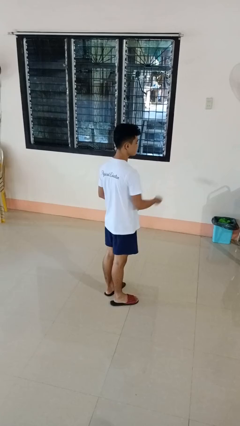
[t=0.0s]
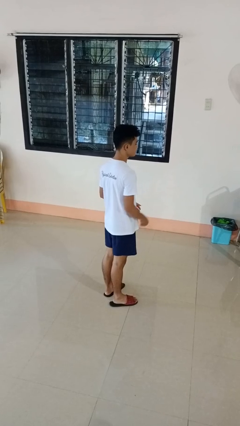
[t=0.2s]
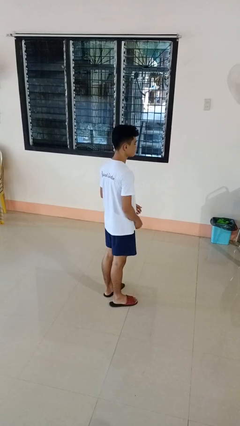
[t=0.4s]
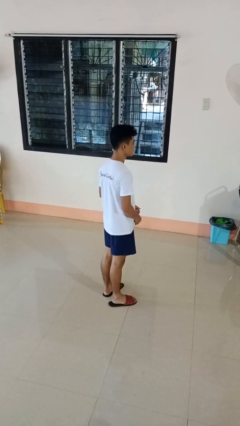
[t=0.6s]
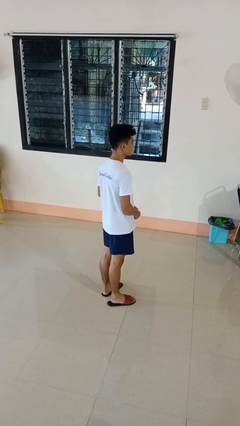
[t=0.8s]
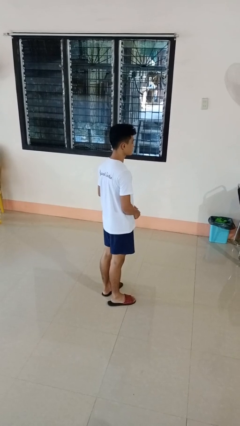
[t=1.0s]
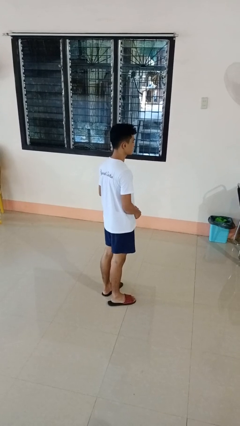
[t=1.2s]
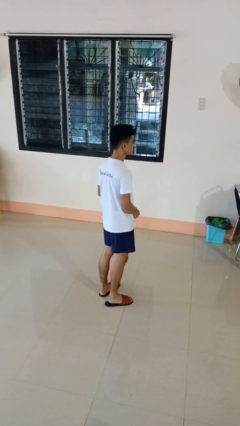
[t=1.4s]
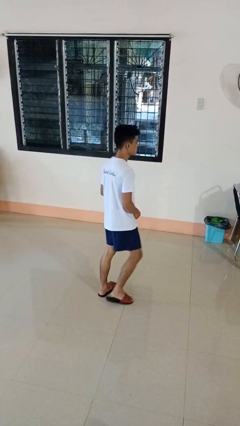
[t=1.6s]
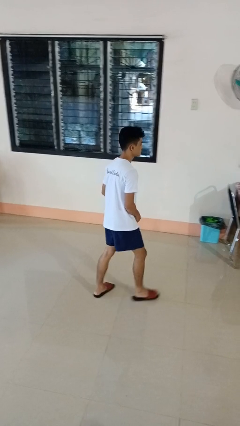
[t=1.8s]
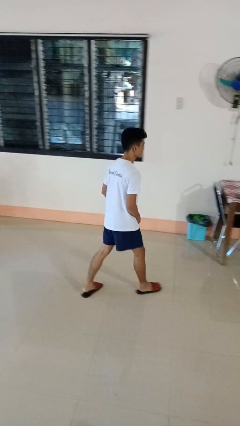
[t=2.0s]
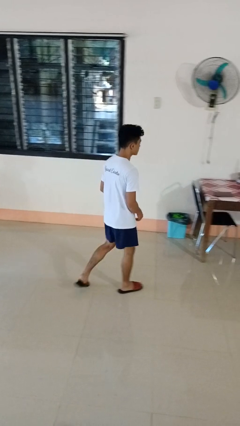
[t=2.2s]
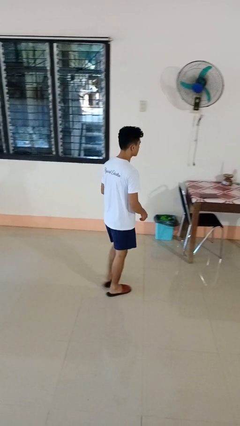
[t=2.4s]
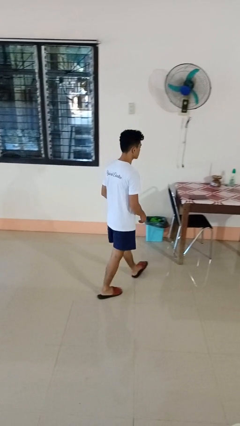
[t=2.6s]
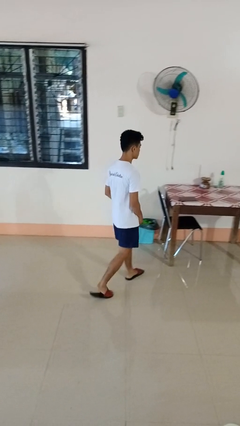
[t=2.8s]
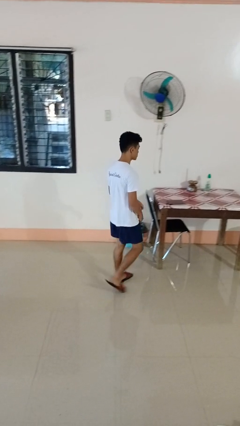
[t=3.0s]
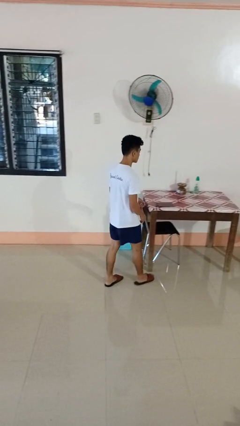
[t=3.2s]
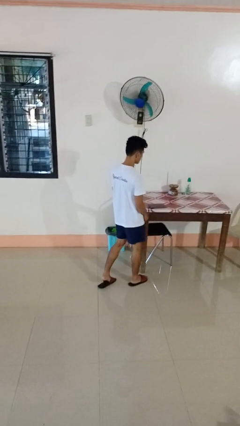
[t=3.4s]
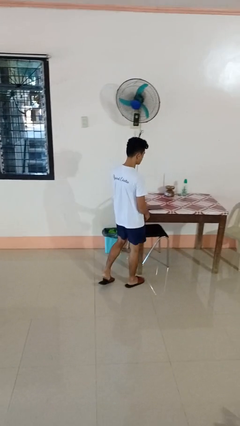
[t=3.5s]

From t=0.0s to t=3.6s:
person throws object on table

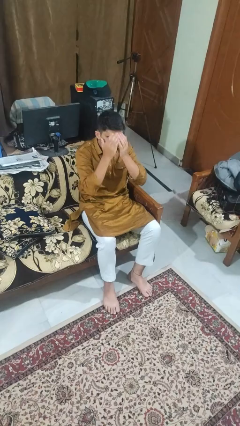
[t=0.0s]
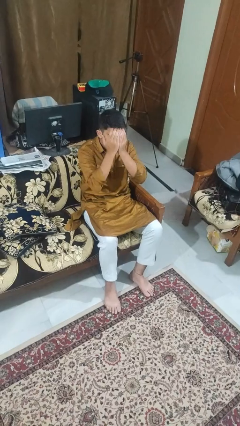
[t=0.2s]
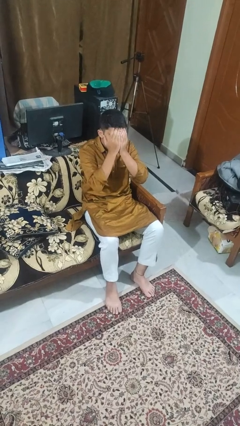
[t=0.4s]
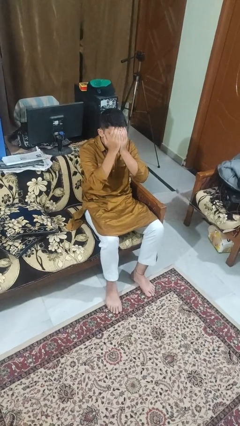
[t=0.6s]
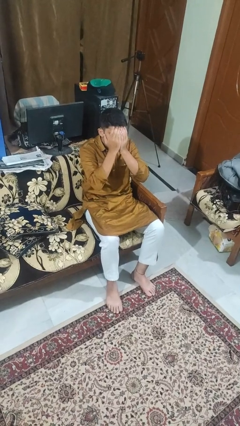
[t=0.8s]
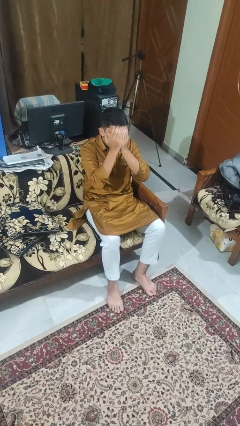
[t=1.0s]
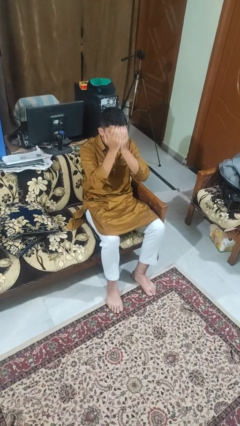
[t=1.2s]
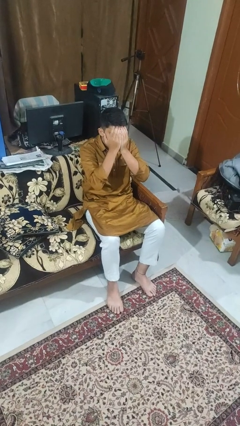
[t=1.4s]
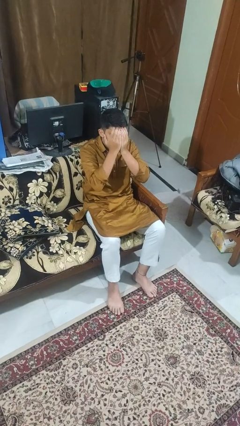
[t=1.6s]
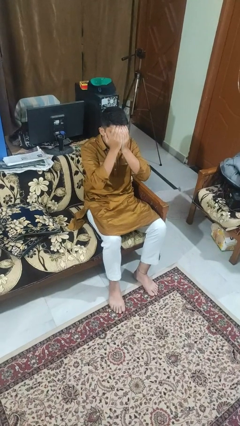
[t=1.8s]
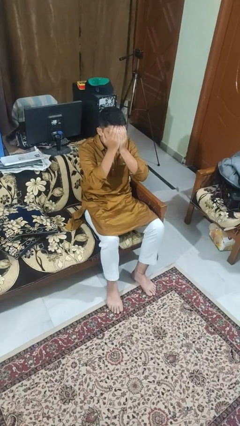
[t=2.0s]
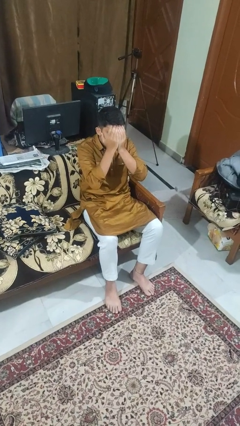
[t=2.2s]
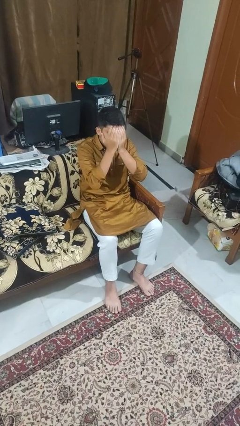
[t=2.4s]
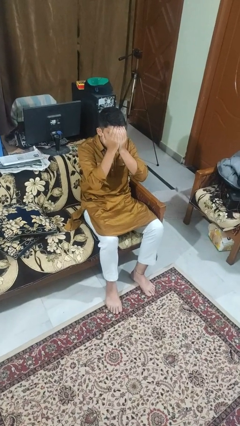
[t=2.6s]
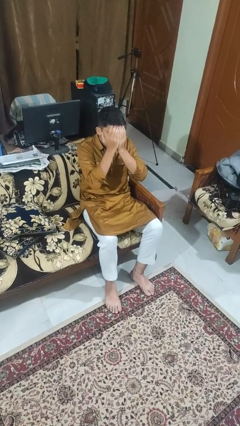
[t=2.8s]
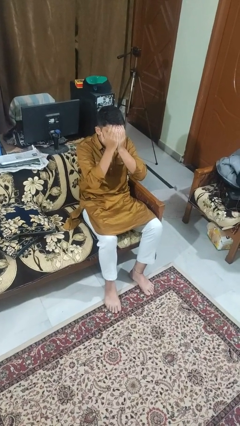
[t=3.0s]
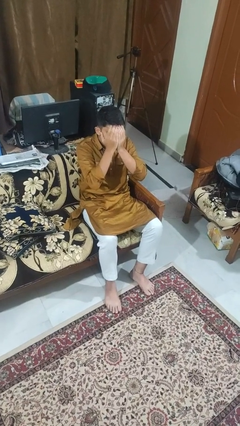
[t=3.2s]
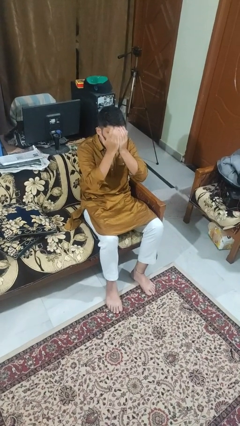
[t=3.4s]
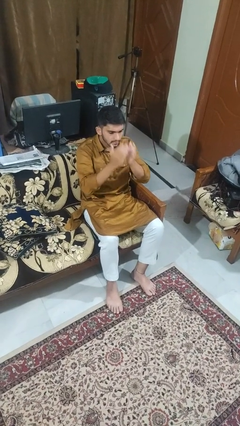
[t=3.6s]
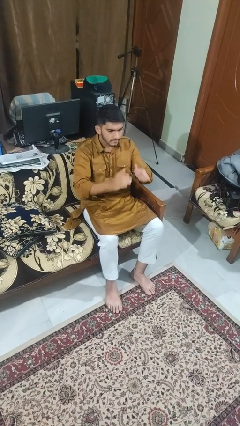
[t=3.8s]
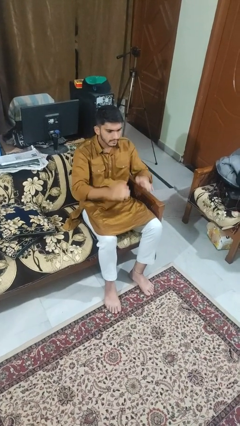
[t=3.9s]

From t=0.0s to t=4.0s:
person covers face with hands

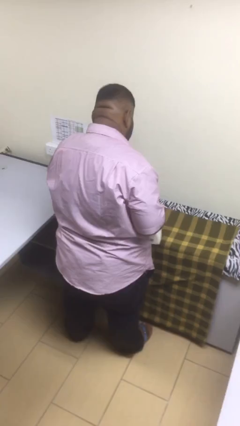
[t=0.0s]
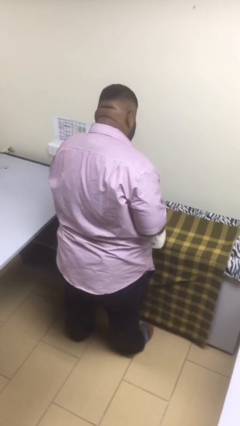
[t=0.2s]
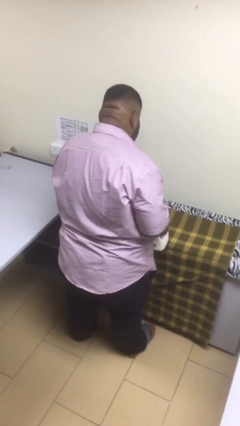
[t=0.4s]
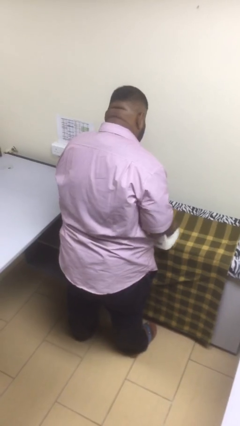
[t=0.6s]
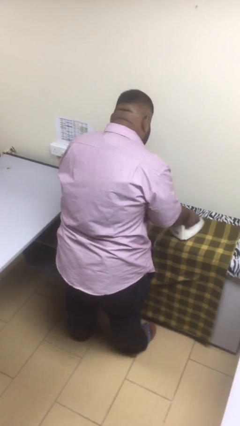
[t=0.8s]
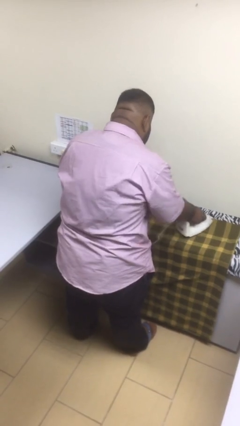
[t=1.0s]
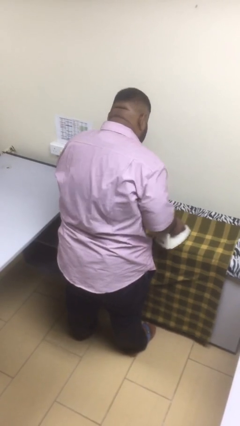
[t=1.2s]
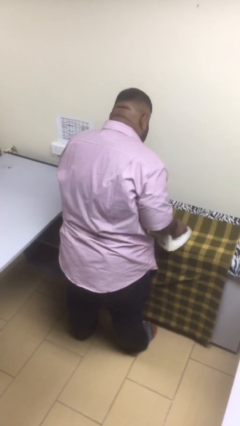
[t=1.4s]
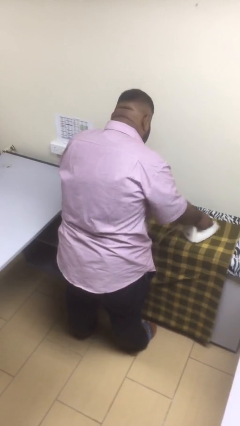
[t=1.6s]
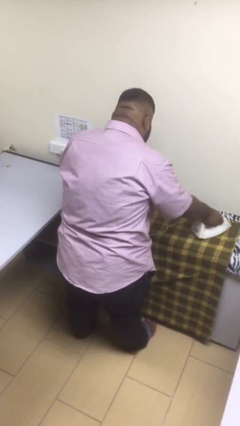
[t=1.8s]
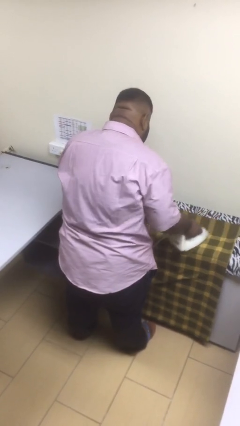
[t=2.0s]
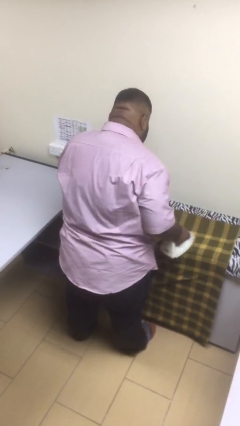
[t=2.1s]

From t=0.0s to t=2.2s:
person irons clothes

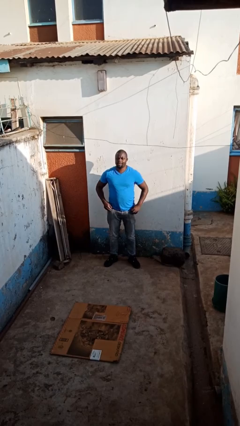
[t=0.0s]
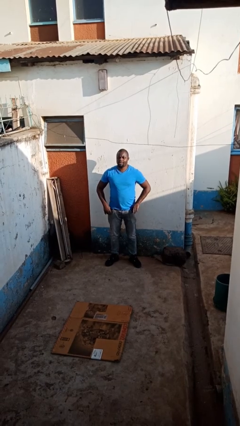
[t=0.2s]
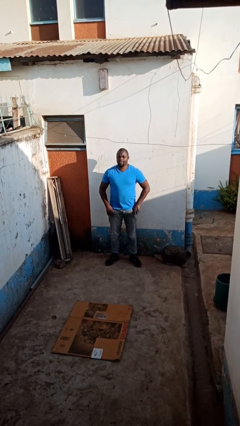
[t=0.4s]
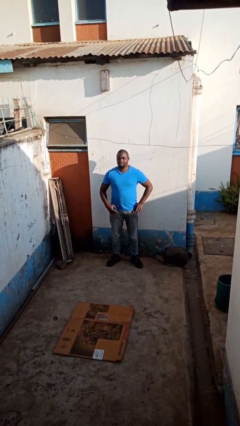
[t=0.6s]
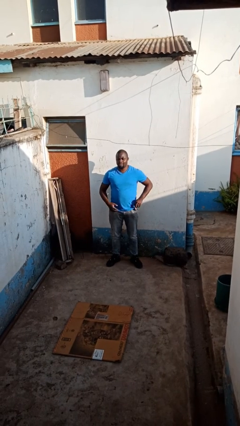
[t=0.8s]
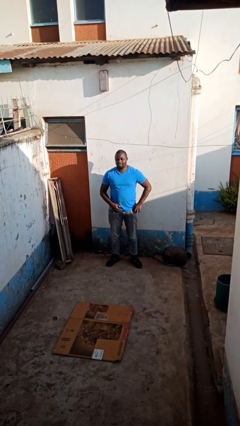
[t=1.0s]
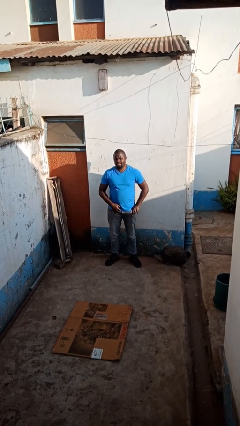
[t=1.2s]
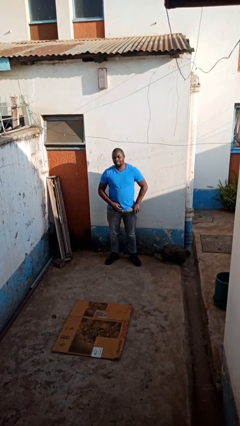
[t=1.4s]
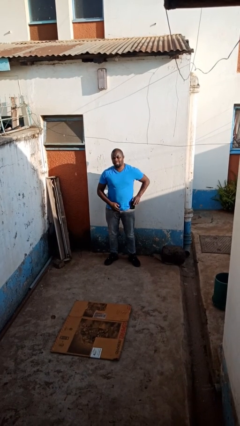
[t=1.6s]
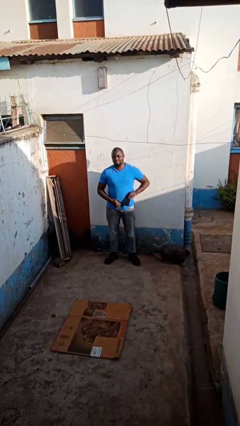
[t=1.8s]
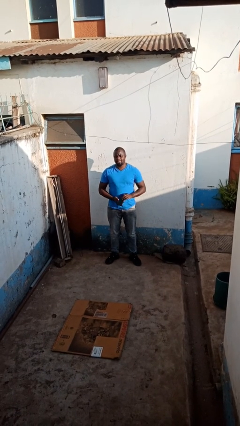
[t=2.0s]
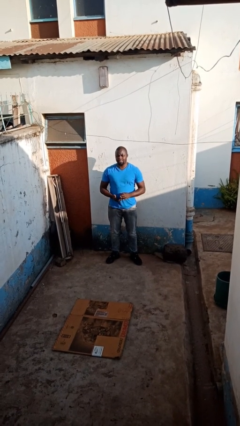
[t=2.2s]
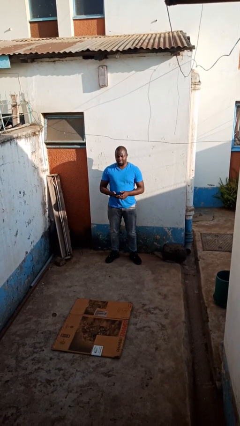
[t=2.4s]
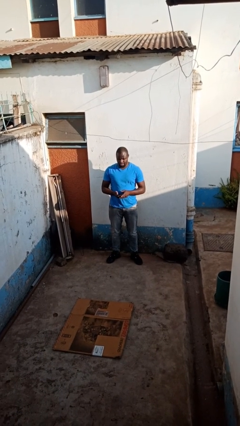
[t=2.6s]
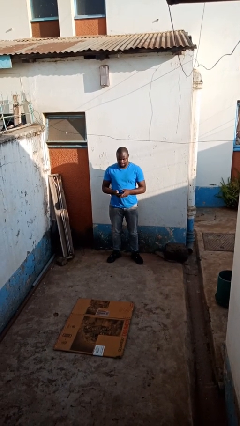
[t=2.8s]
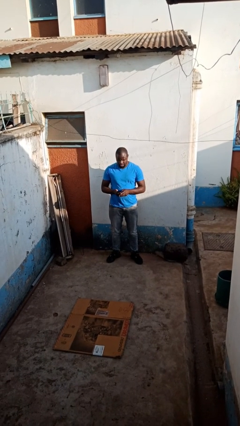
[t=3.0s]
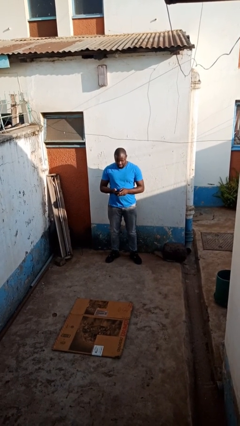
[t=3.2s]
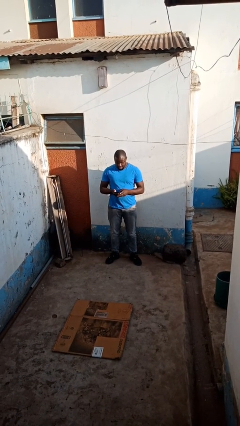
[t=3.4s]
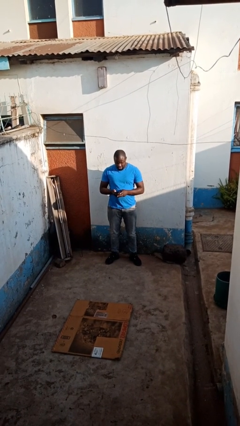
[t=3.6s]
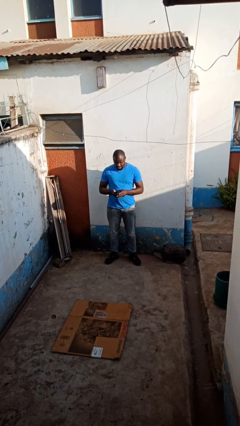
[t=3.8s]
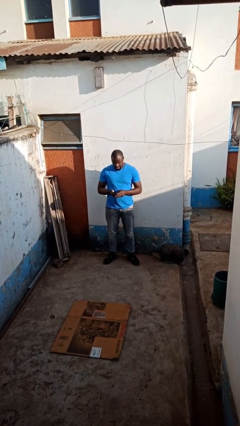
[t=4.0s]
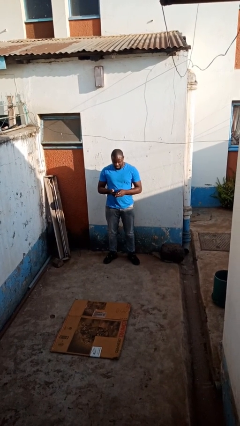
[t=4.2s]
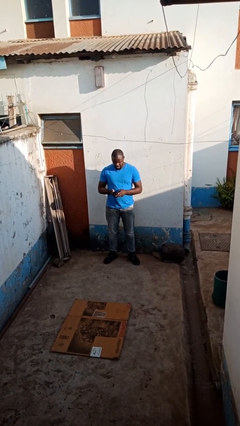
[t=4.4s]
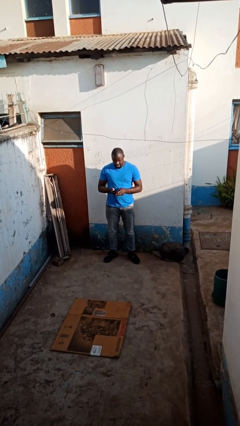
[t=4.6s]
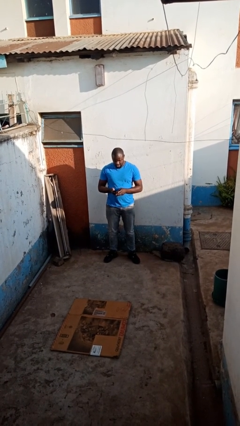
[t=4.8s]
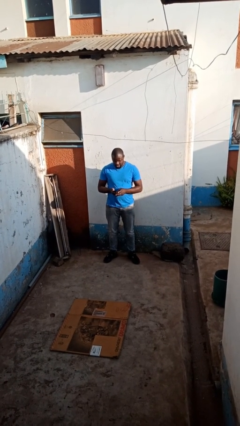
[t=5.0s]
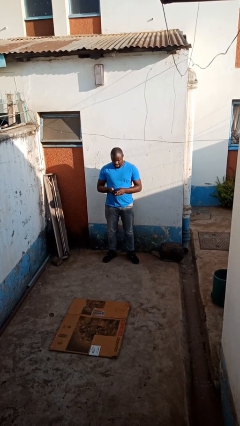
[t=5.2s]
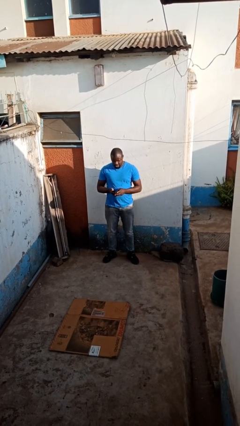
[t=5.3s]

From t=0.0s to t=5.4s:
person takes phone from pocket

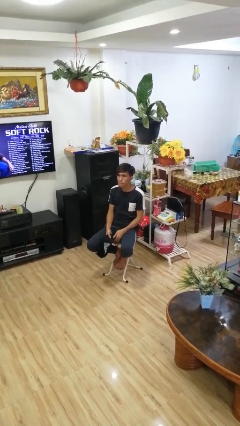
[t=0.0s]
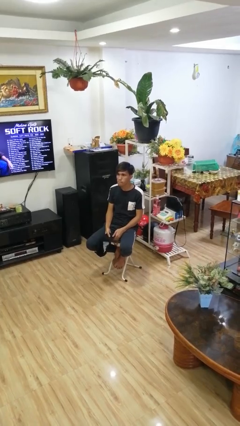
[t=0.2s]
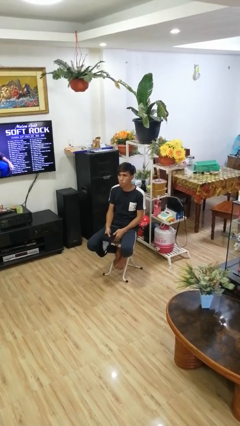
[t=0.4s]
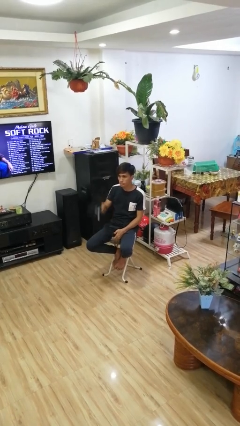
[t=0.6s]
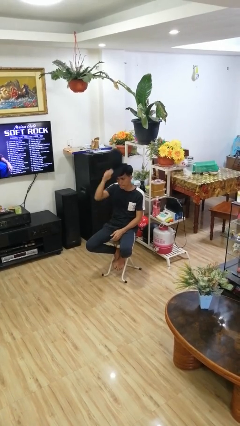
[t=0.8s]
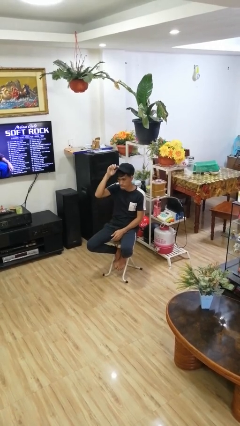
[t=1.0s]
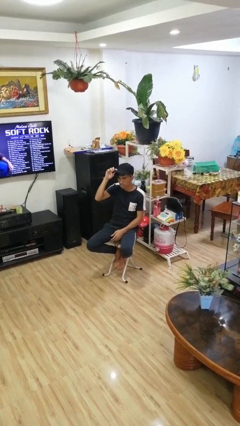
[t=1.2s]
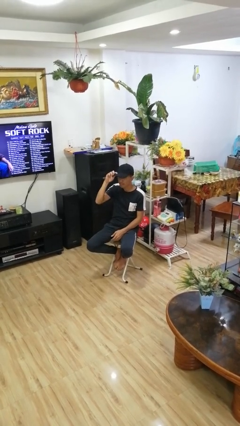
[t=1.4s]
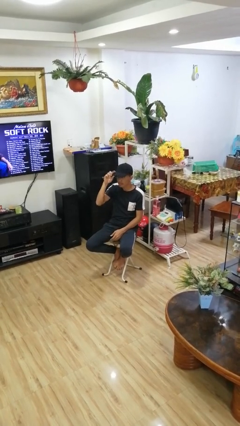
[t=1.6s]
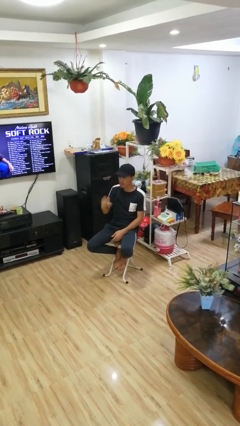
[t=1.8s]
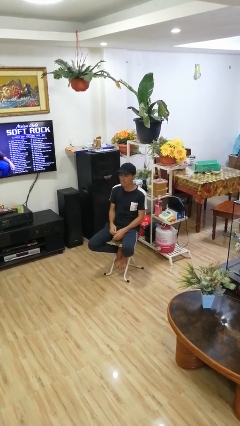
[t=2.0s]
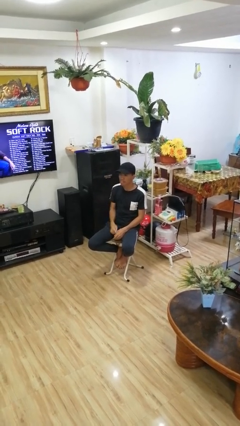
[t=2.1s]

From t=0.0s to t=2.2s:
person puts on hat

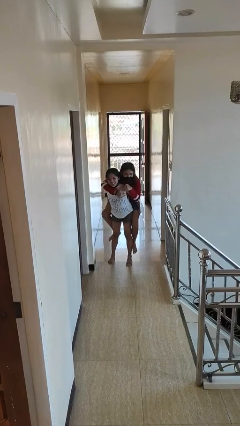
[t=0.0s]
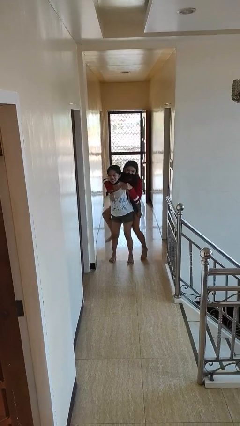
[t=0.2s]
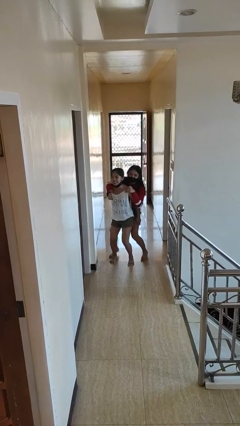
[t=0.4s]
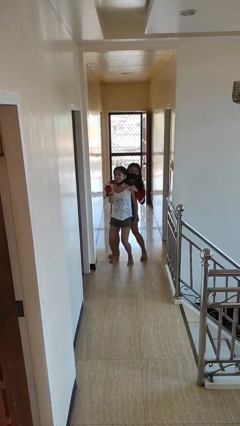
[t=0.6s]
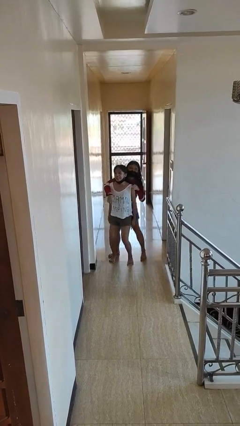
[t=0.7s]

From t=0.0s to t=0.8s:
person puts down person
